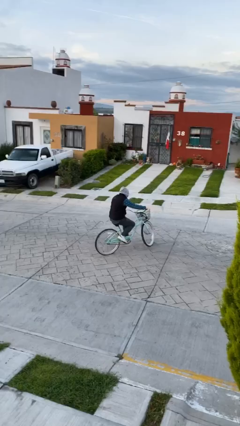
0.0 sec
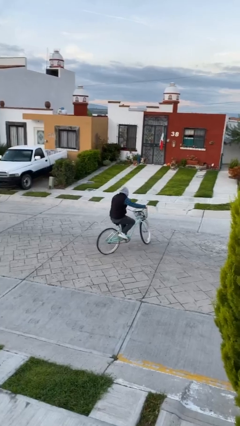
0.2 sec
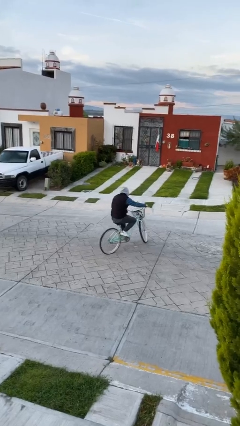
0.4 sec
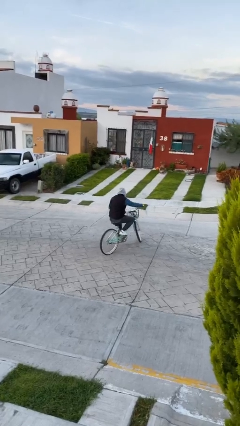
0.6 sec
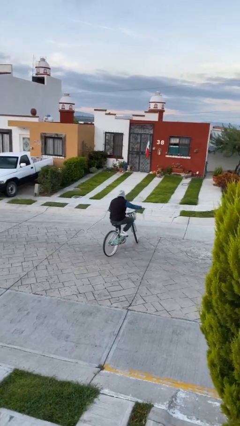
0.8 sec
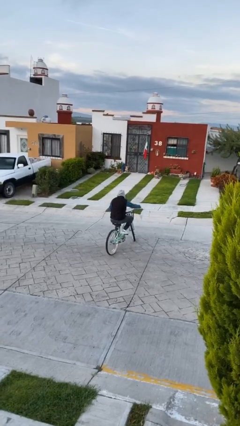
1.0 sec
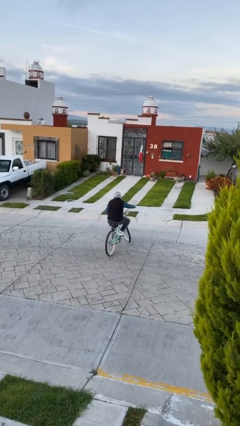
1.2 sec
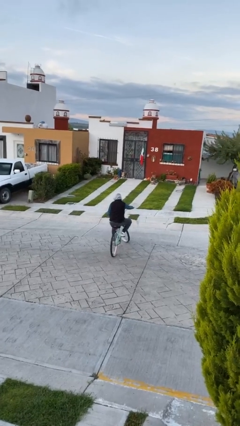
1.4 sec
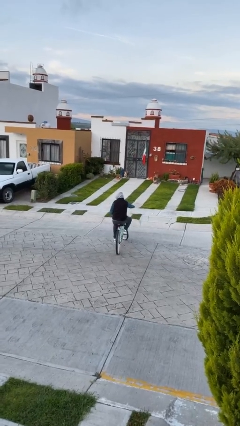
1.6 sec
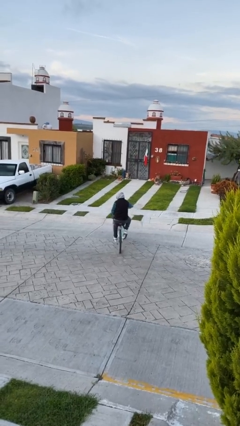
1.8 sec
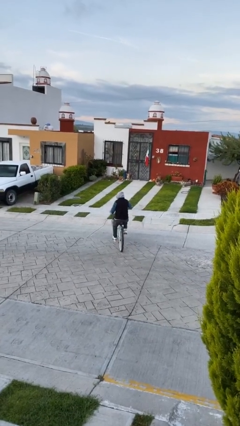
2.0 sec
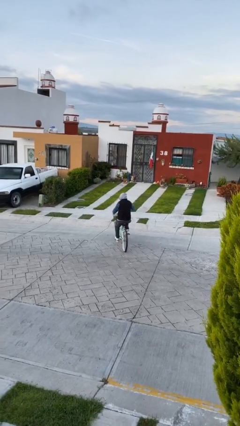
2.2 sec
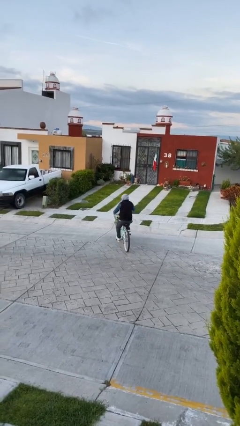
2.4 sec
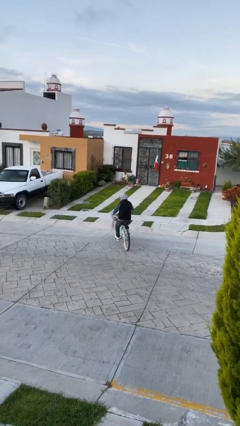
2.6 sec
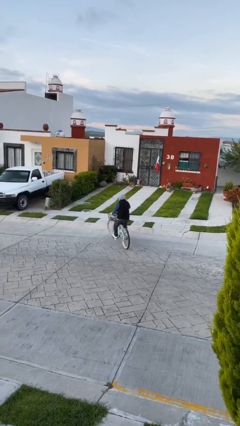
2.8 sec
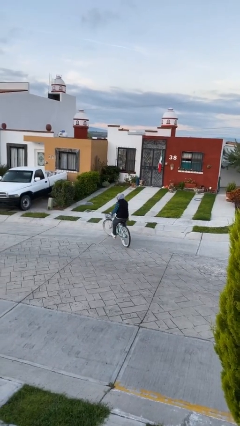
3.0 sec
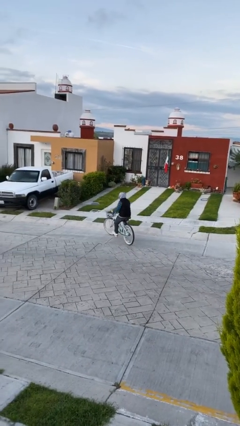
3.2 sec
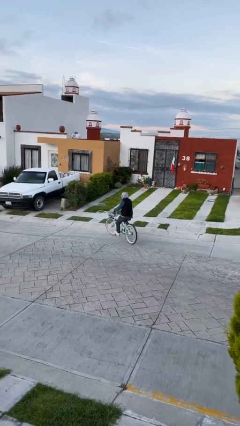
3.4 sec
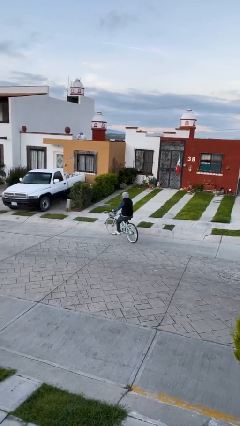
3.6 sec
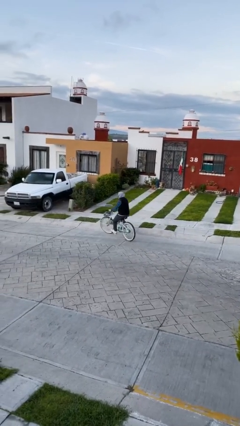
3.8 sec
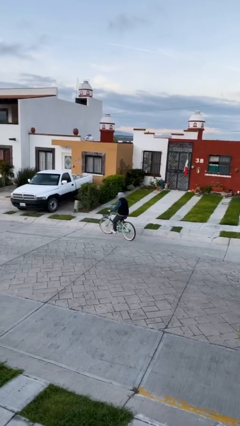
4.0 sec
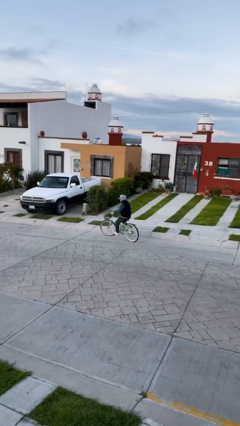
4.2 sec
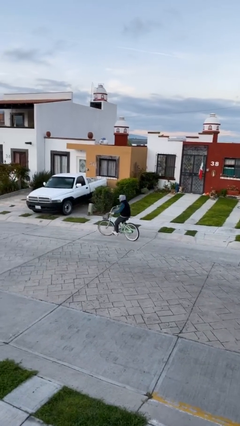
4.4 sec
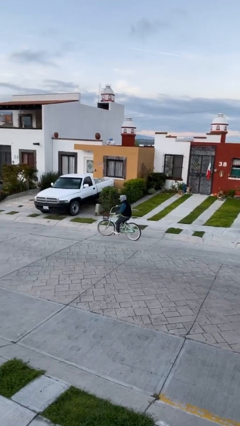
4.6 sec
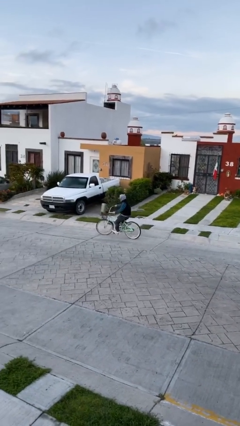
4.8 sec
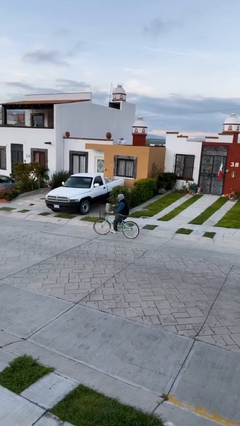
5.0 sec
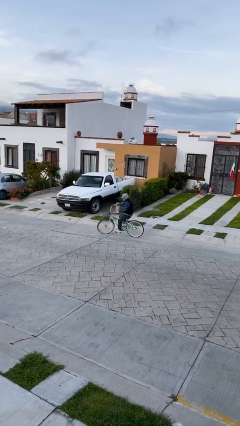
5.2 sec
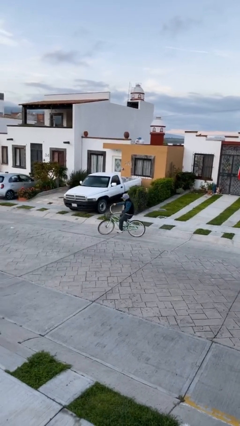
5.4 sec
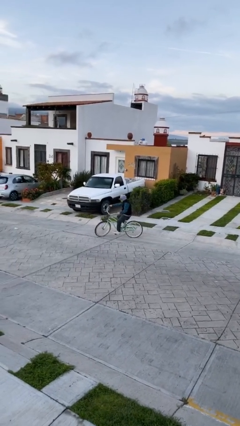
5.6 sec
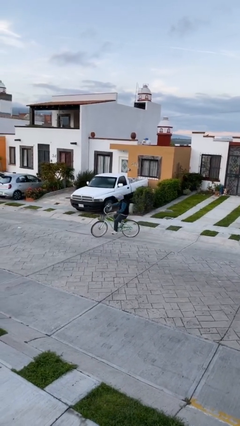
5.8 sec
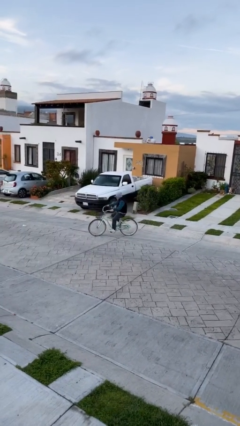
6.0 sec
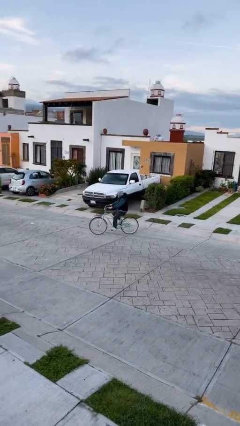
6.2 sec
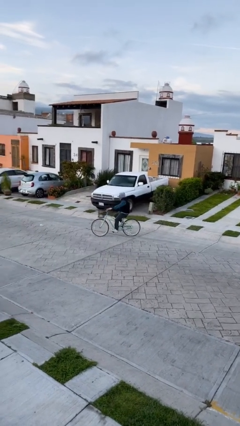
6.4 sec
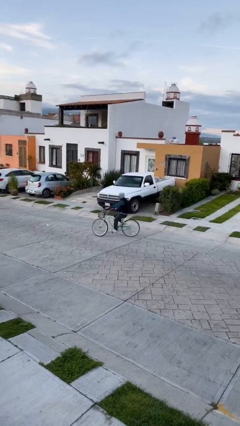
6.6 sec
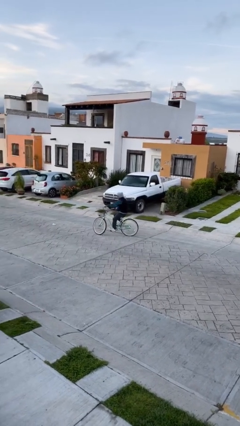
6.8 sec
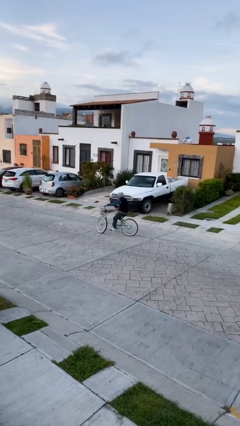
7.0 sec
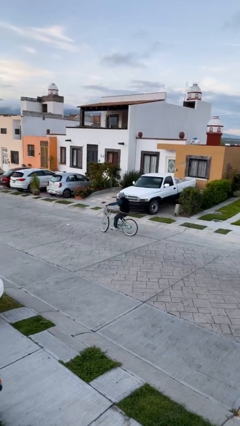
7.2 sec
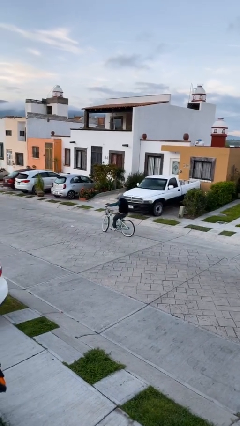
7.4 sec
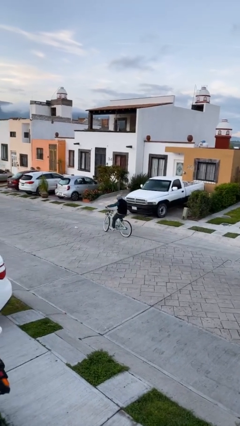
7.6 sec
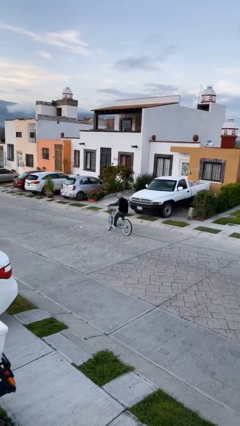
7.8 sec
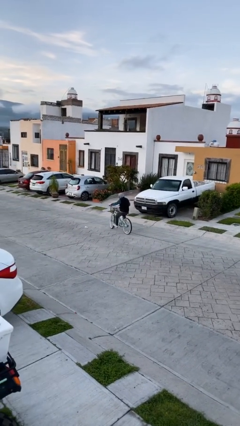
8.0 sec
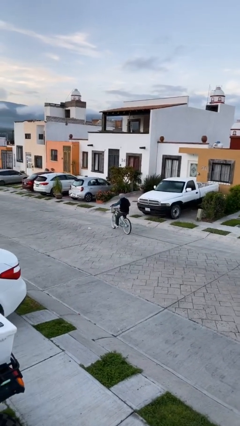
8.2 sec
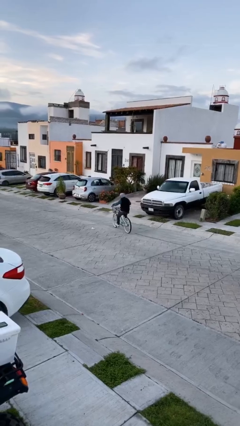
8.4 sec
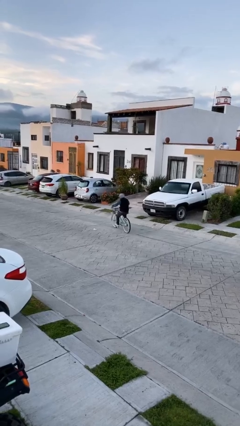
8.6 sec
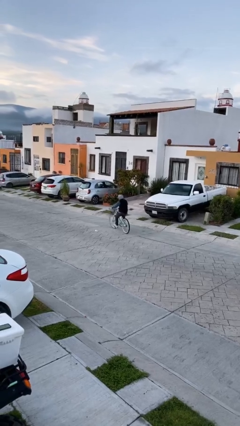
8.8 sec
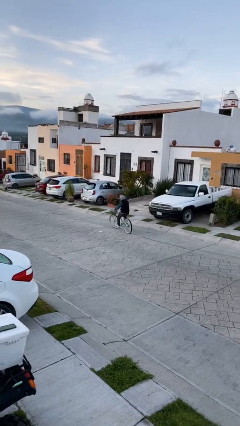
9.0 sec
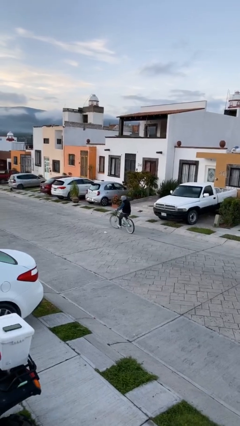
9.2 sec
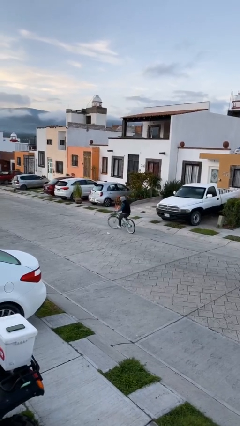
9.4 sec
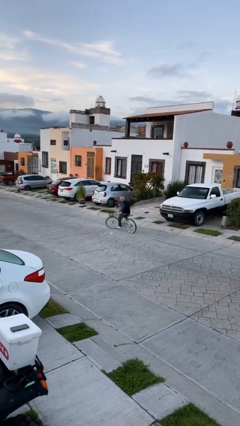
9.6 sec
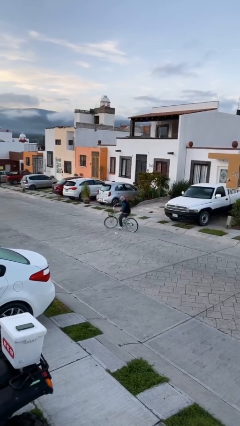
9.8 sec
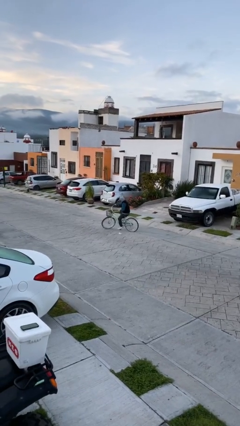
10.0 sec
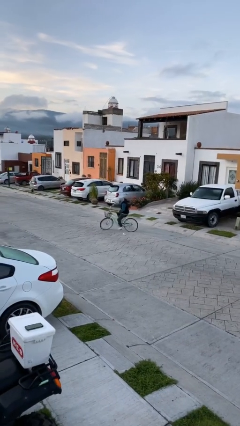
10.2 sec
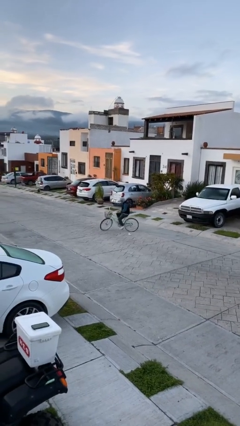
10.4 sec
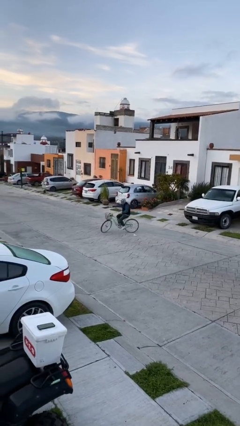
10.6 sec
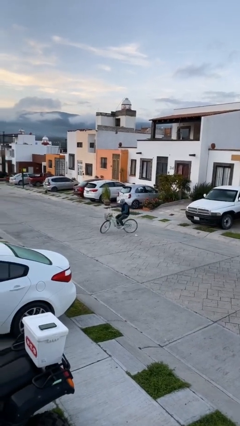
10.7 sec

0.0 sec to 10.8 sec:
person rides bicycle

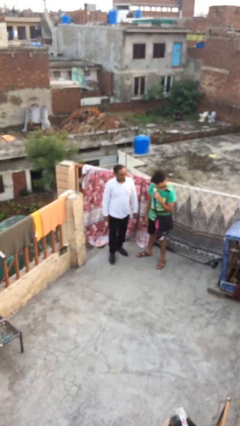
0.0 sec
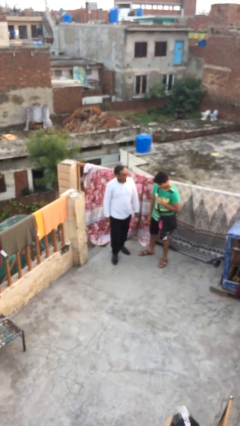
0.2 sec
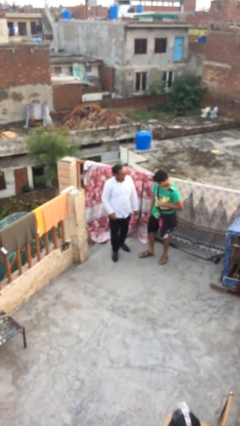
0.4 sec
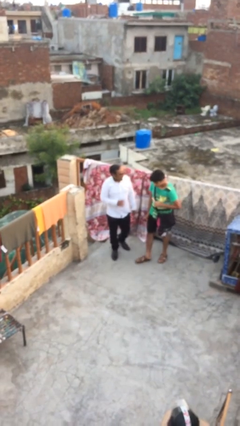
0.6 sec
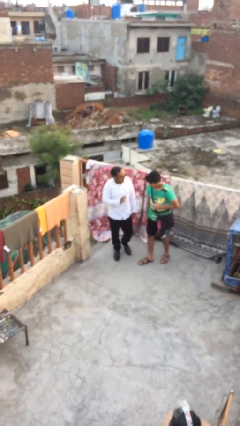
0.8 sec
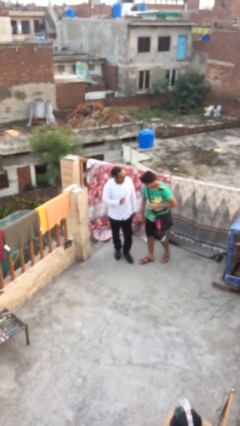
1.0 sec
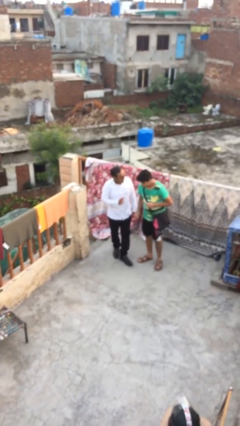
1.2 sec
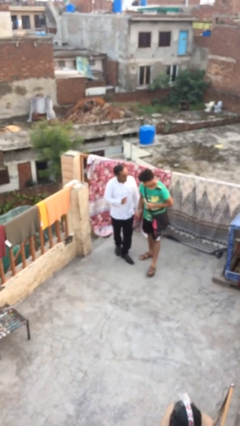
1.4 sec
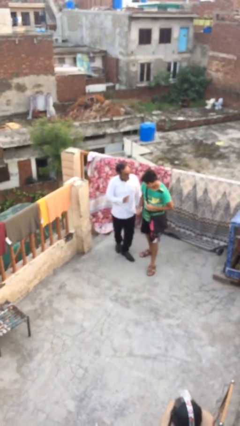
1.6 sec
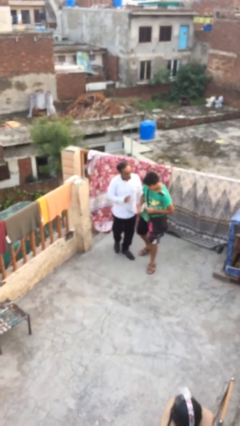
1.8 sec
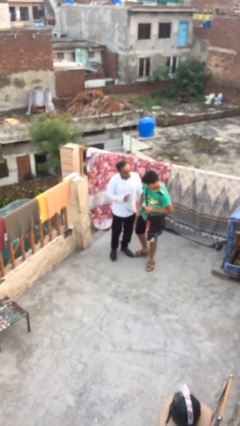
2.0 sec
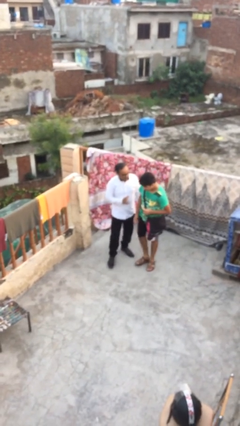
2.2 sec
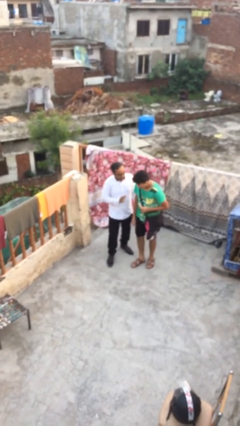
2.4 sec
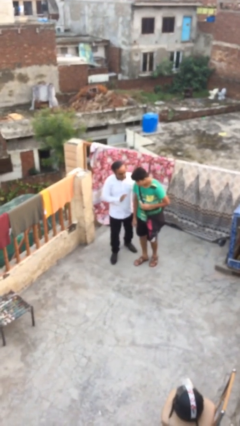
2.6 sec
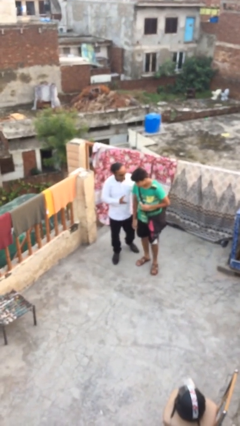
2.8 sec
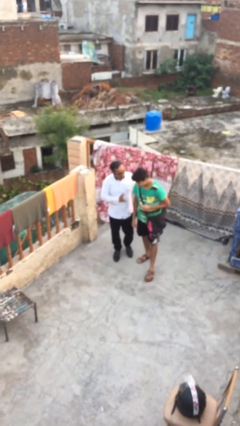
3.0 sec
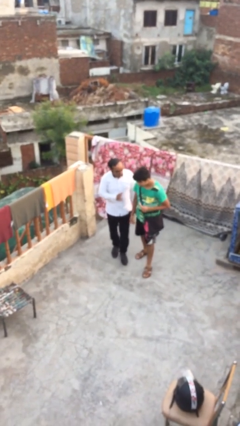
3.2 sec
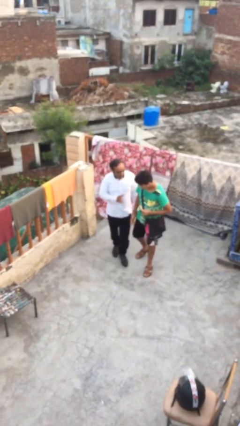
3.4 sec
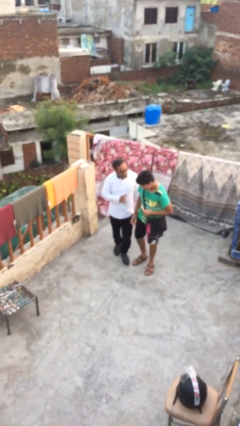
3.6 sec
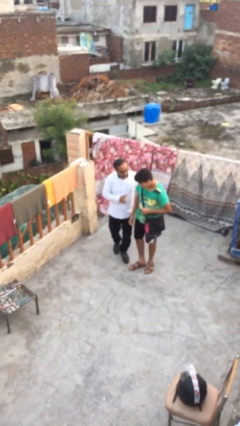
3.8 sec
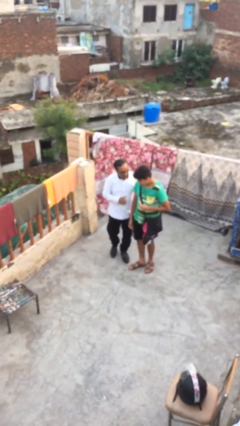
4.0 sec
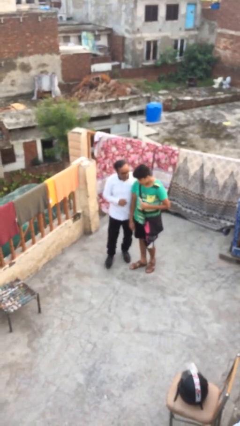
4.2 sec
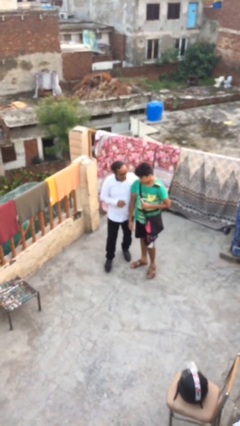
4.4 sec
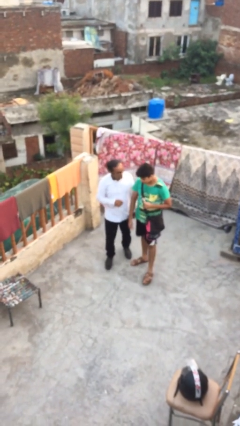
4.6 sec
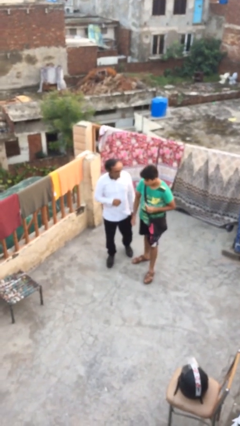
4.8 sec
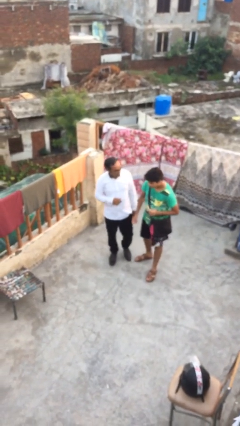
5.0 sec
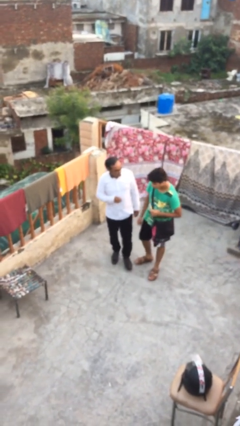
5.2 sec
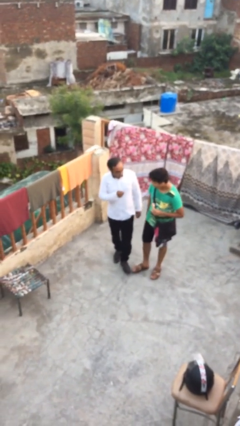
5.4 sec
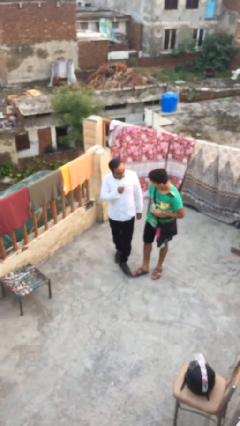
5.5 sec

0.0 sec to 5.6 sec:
person talks to person

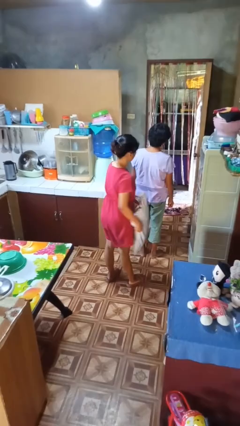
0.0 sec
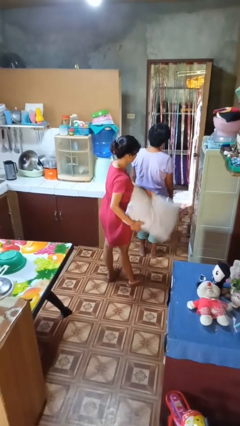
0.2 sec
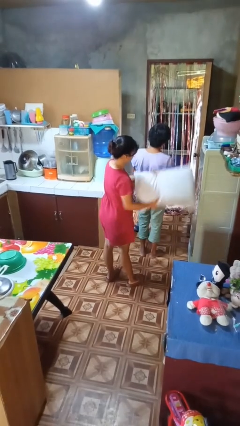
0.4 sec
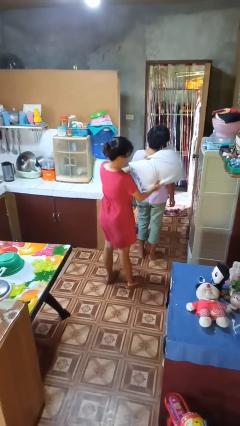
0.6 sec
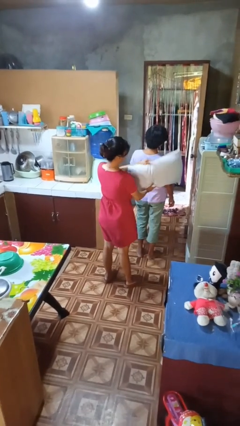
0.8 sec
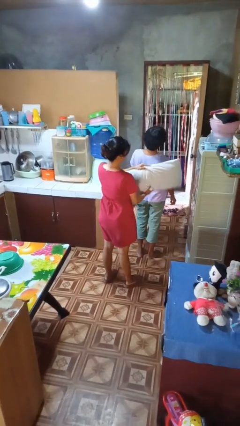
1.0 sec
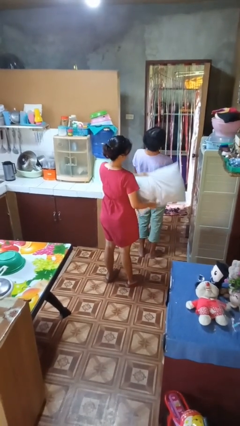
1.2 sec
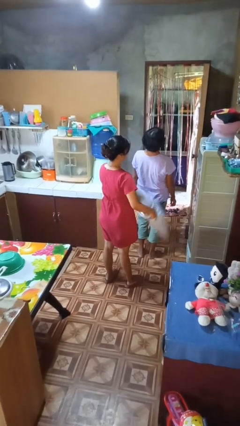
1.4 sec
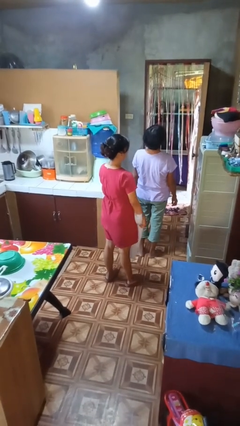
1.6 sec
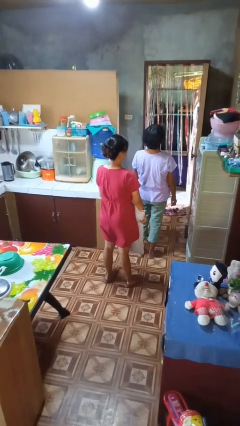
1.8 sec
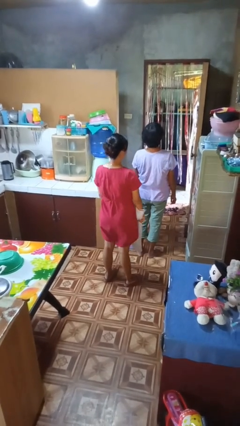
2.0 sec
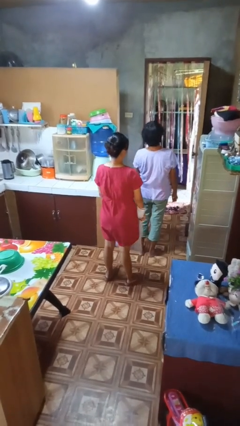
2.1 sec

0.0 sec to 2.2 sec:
person hits person with pillow
